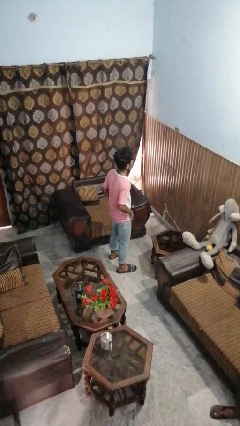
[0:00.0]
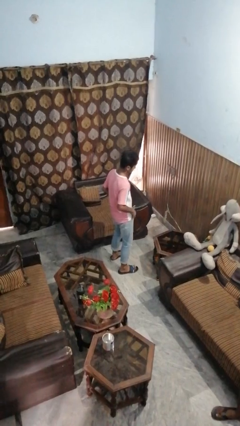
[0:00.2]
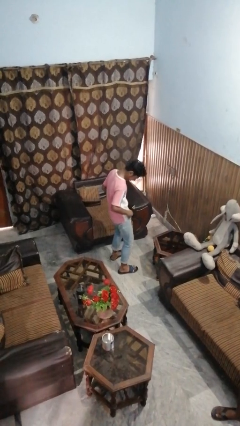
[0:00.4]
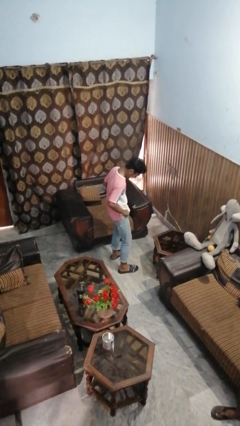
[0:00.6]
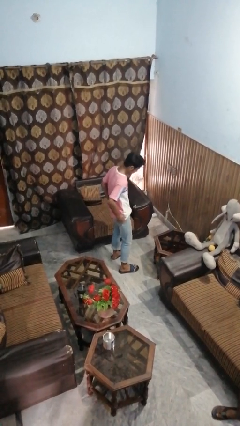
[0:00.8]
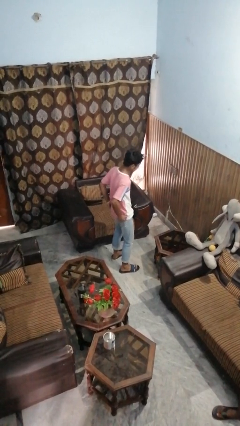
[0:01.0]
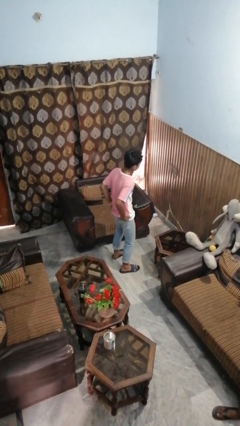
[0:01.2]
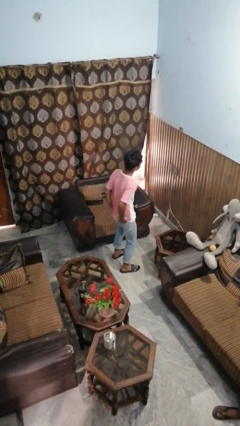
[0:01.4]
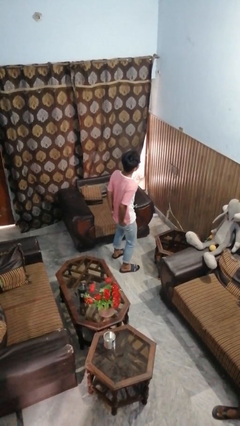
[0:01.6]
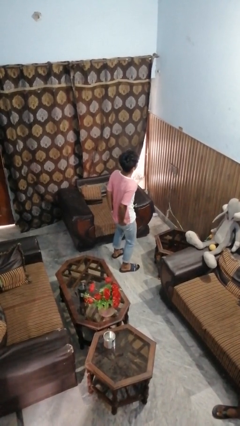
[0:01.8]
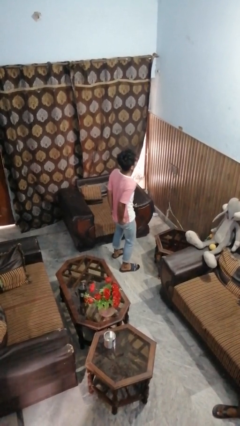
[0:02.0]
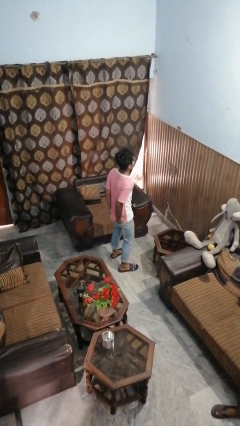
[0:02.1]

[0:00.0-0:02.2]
person puts hands in back pockets

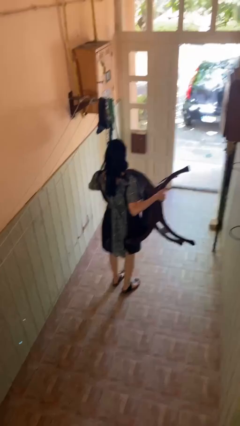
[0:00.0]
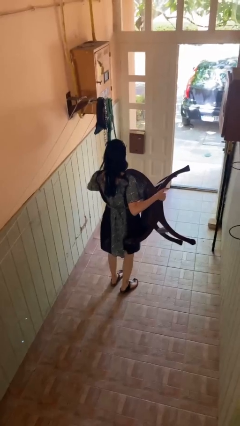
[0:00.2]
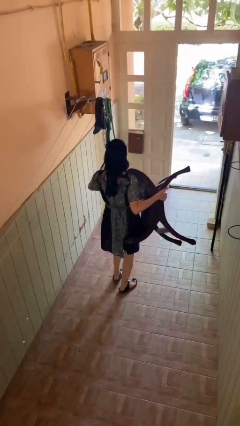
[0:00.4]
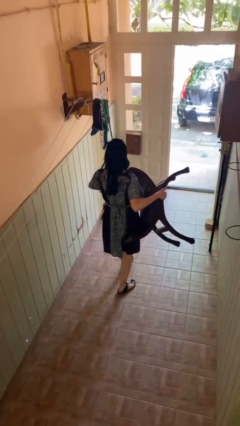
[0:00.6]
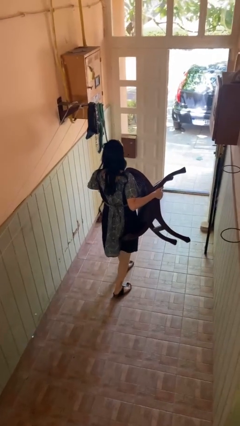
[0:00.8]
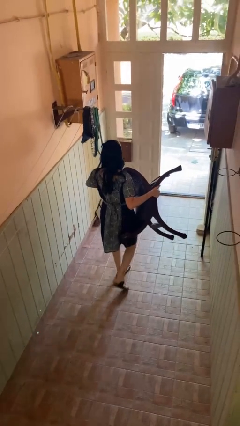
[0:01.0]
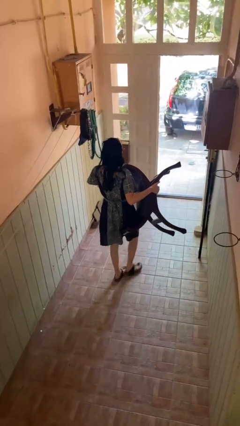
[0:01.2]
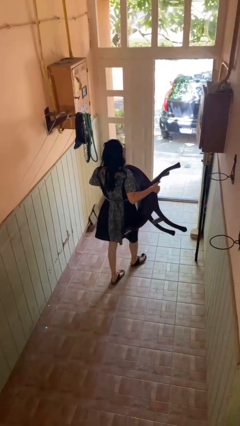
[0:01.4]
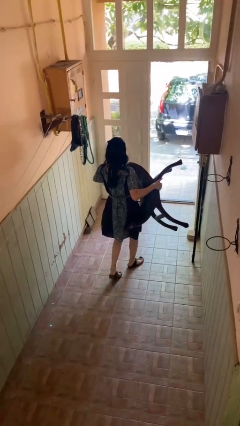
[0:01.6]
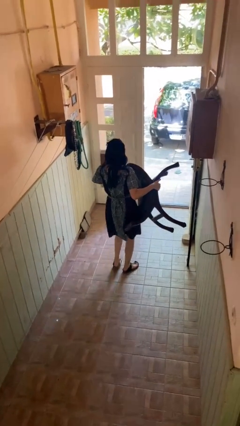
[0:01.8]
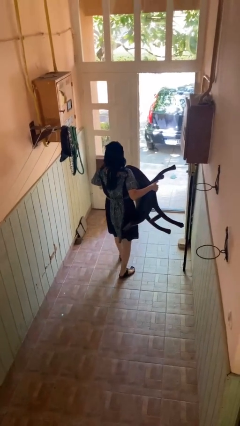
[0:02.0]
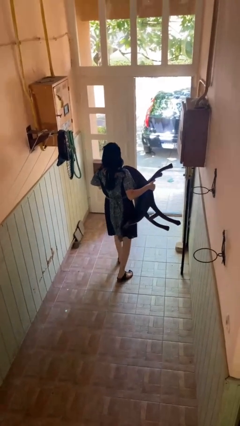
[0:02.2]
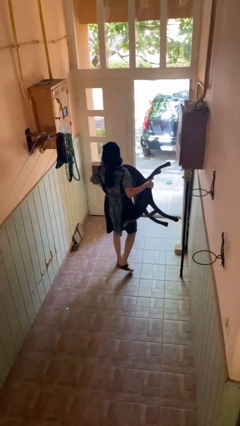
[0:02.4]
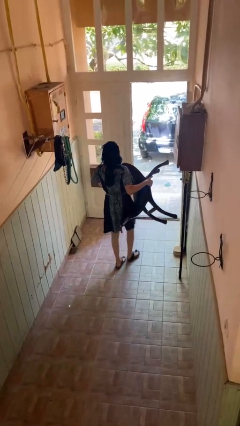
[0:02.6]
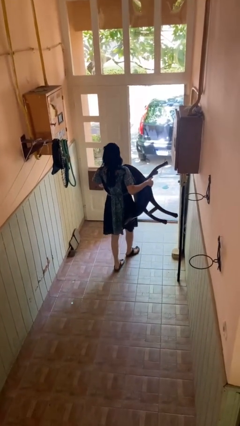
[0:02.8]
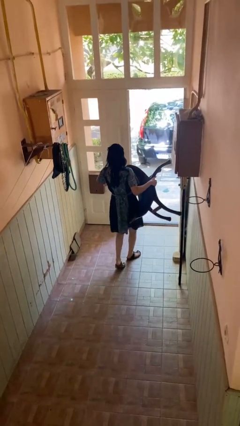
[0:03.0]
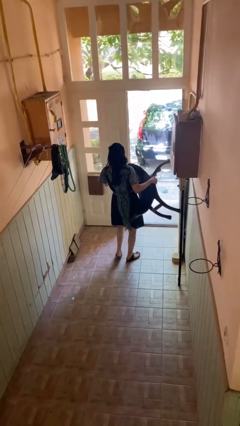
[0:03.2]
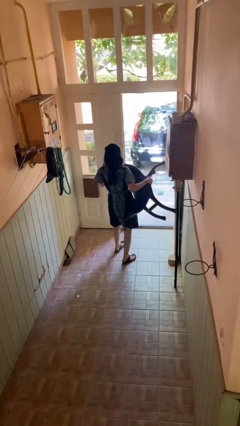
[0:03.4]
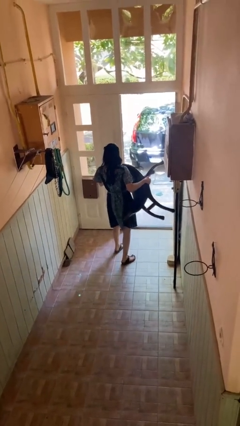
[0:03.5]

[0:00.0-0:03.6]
person carries furniture

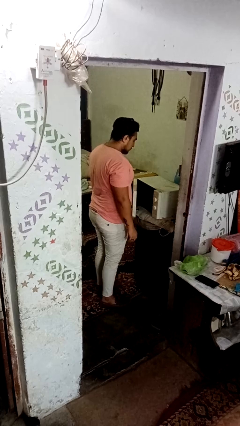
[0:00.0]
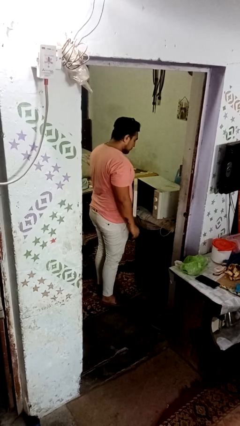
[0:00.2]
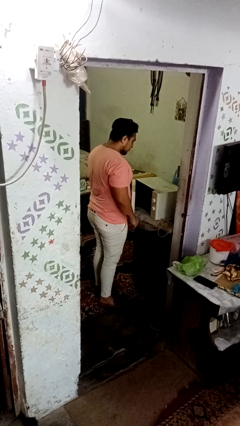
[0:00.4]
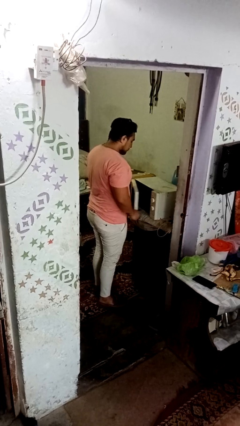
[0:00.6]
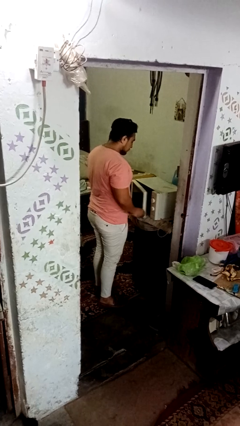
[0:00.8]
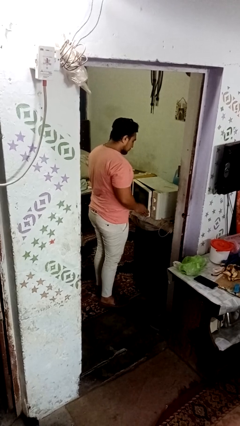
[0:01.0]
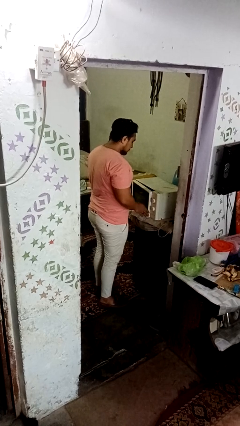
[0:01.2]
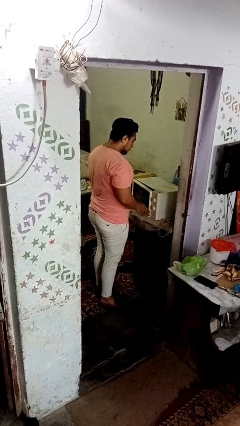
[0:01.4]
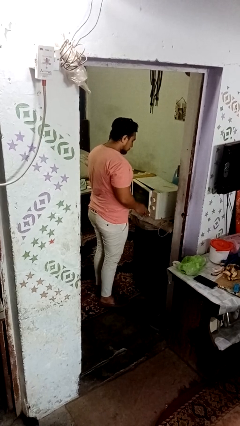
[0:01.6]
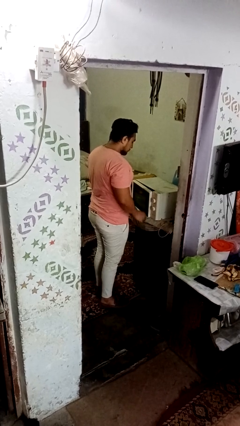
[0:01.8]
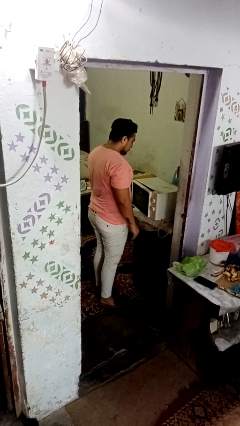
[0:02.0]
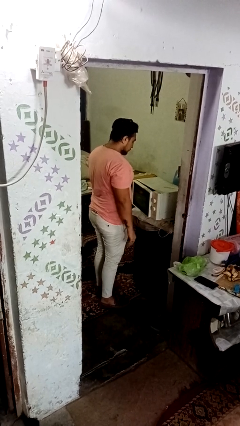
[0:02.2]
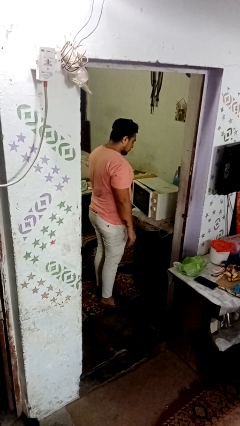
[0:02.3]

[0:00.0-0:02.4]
person closes dishwasher

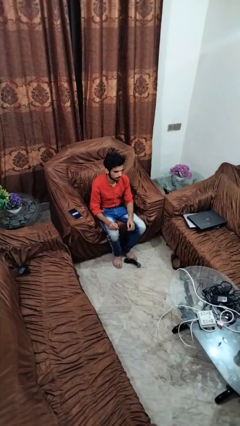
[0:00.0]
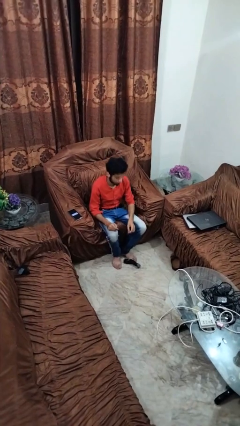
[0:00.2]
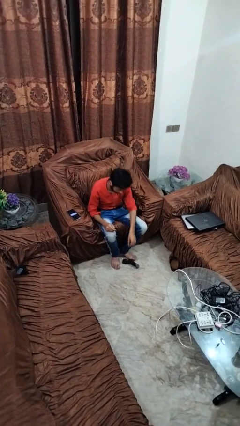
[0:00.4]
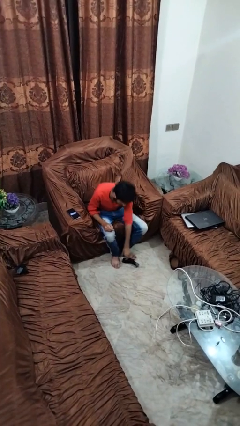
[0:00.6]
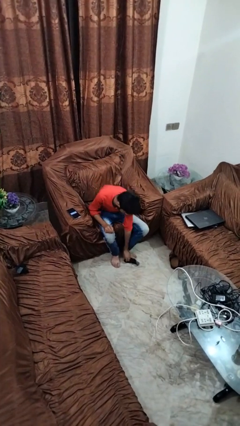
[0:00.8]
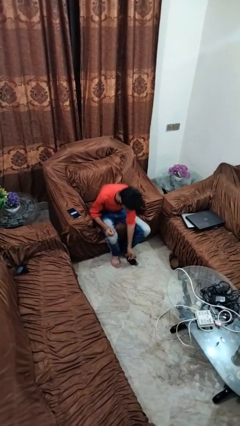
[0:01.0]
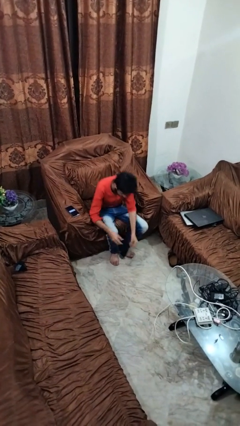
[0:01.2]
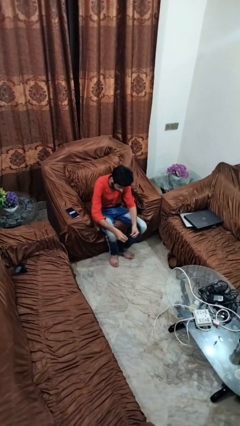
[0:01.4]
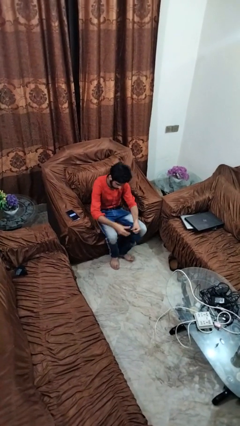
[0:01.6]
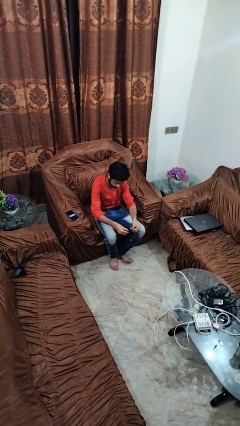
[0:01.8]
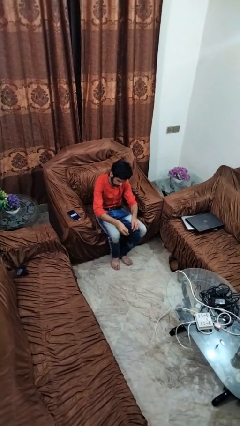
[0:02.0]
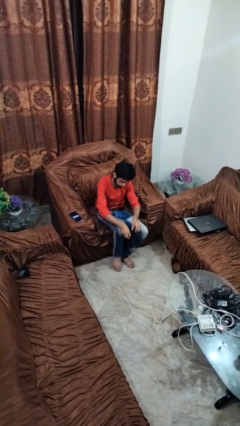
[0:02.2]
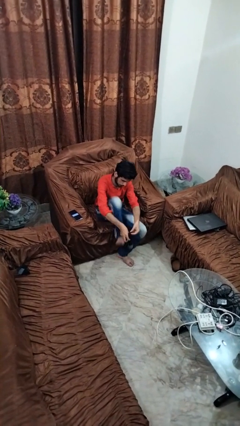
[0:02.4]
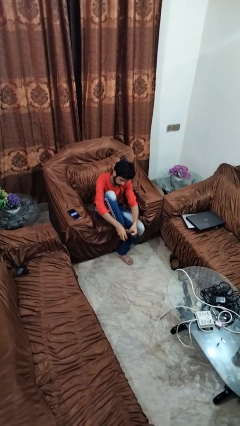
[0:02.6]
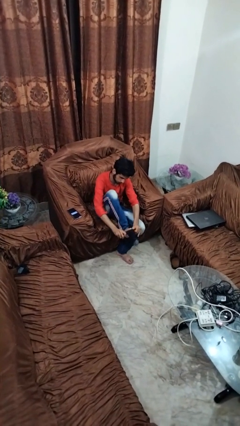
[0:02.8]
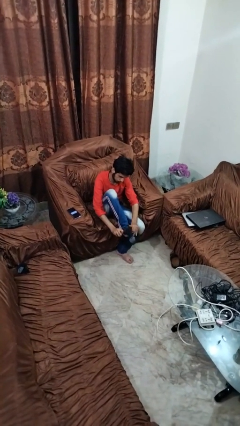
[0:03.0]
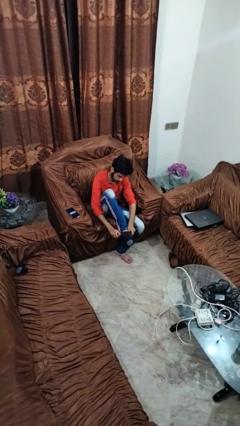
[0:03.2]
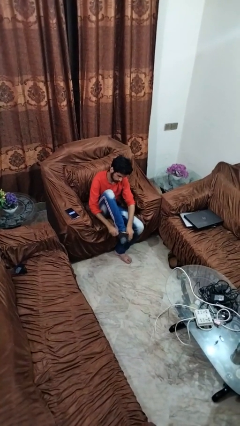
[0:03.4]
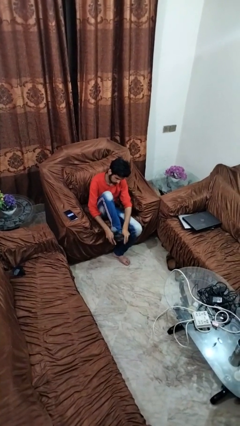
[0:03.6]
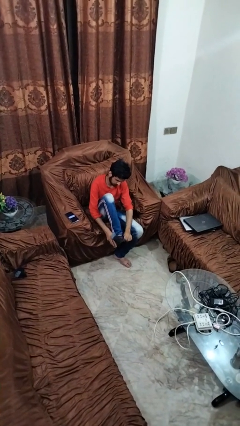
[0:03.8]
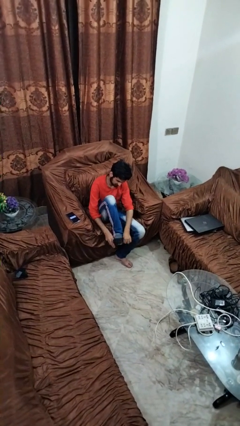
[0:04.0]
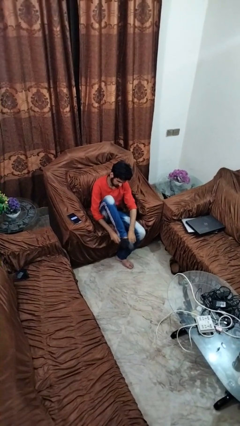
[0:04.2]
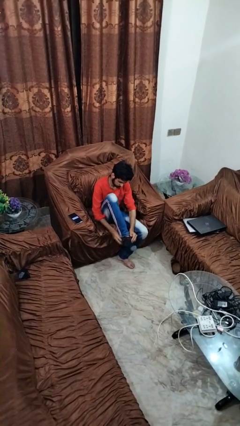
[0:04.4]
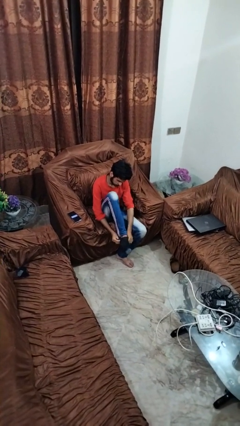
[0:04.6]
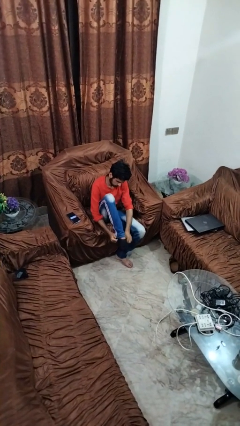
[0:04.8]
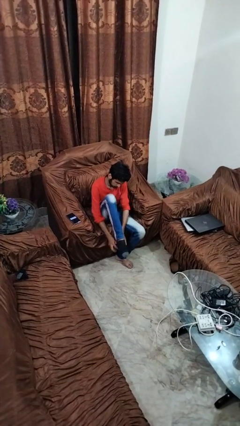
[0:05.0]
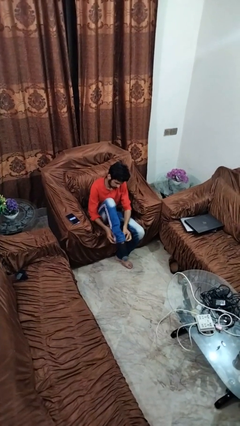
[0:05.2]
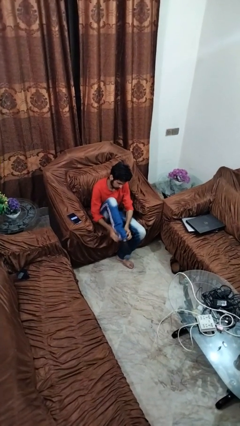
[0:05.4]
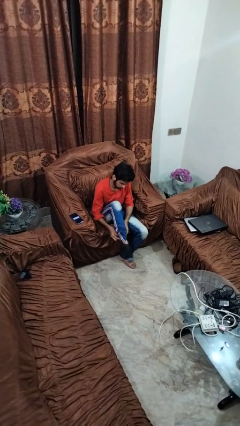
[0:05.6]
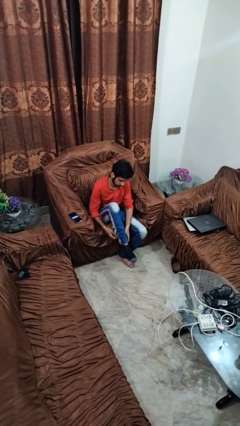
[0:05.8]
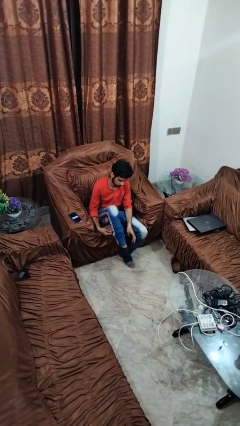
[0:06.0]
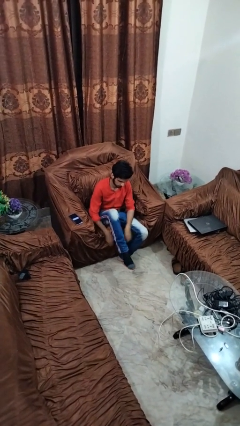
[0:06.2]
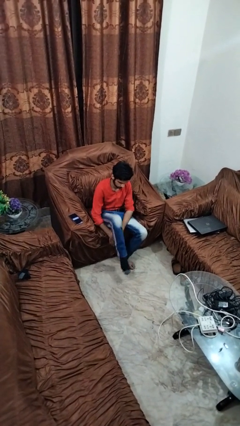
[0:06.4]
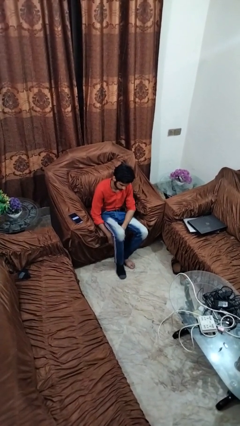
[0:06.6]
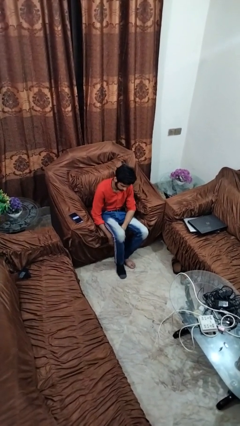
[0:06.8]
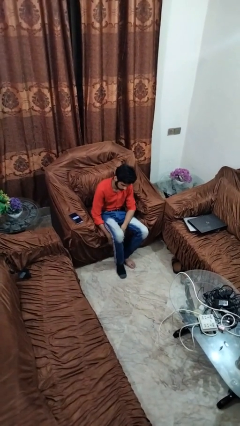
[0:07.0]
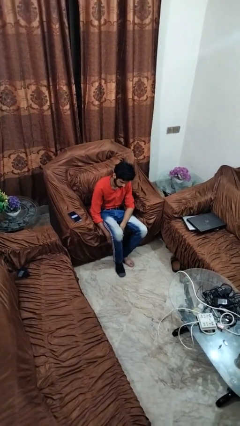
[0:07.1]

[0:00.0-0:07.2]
person puts on socks

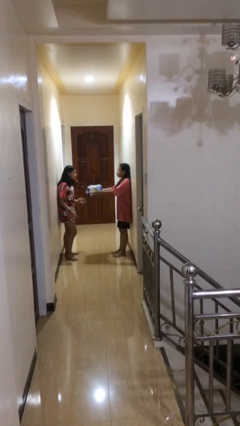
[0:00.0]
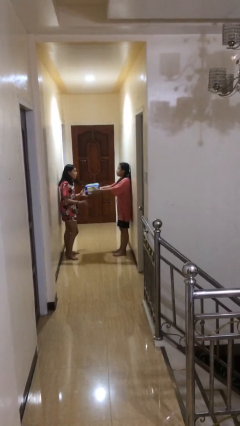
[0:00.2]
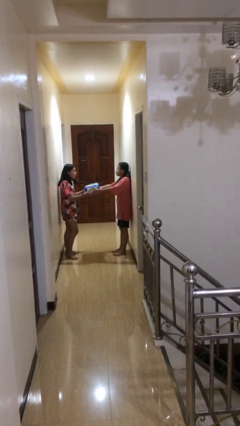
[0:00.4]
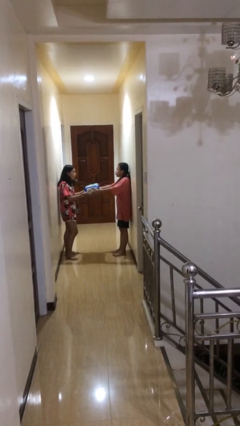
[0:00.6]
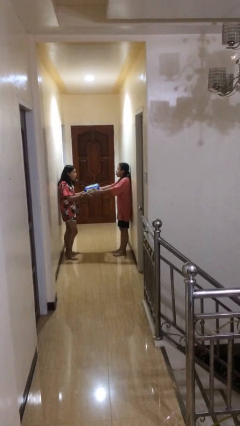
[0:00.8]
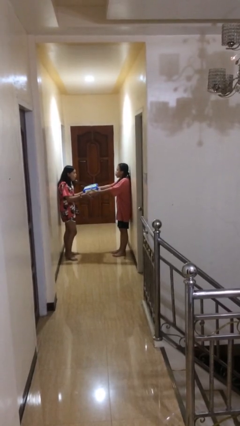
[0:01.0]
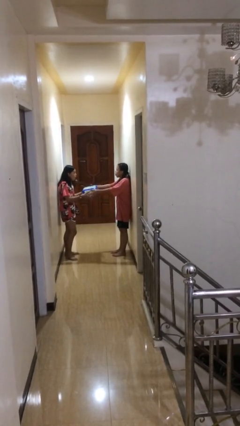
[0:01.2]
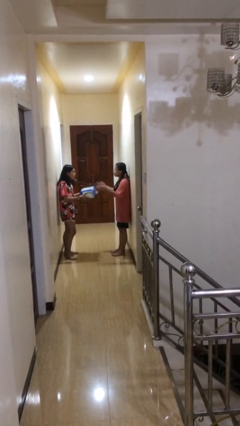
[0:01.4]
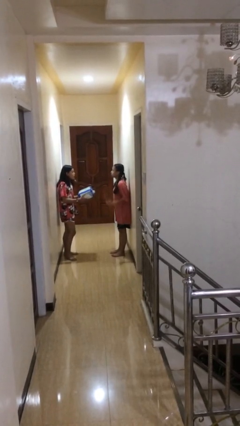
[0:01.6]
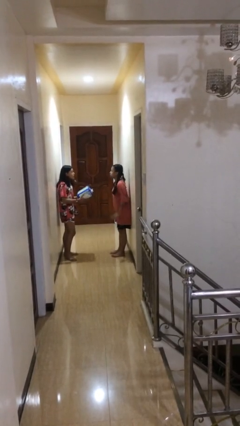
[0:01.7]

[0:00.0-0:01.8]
person transfers object to person

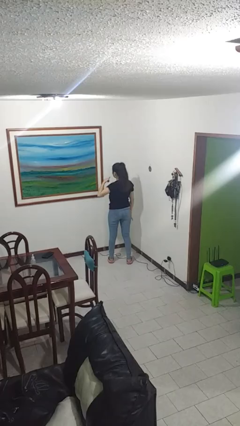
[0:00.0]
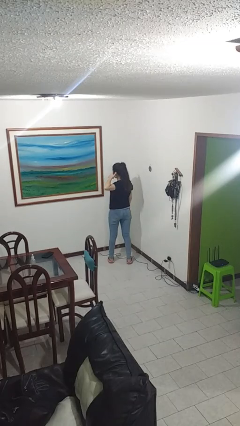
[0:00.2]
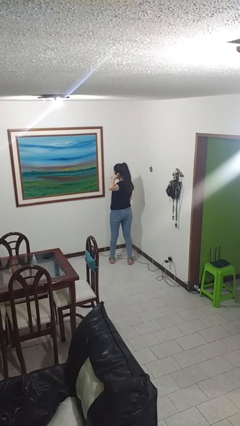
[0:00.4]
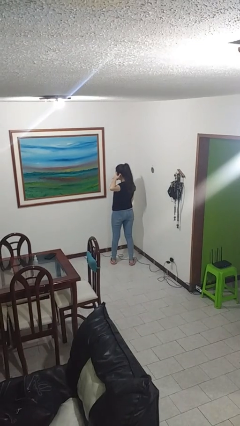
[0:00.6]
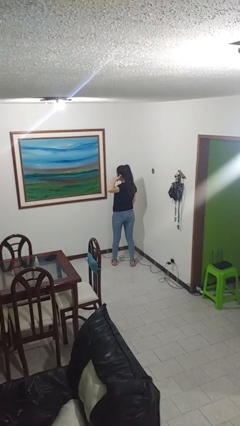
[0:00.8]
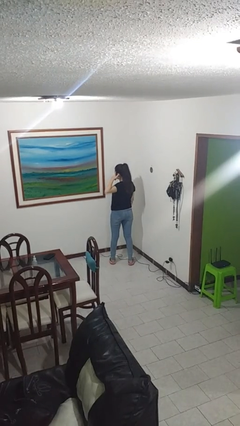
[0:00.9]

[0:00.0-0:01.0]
person gestures call me
